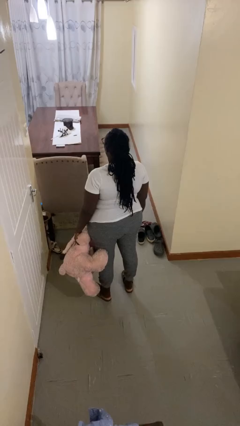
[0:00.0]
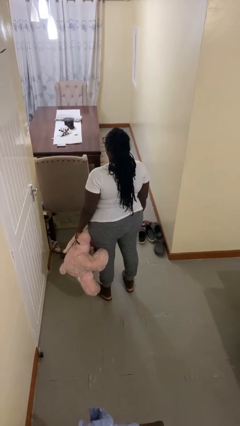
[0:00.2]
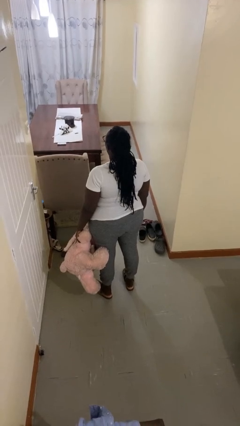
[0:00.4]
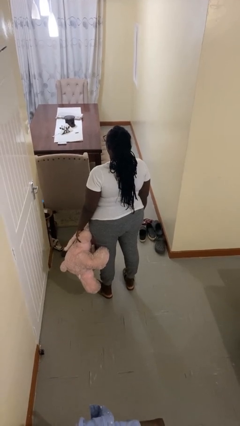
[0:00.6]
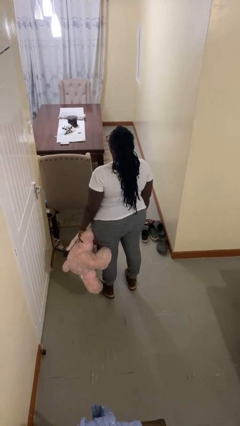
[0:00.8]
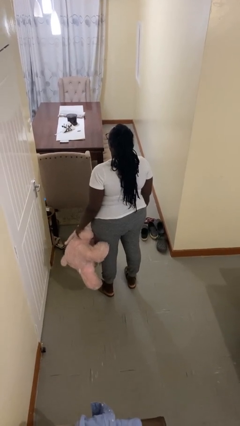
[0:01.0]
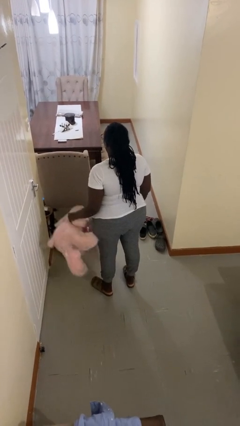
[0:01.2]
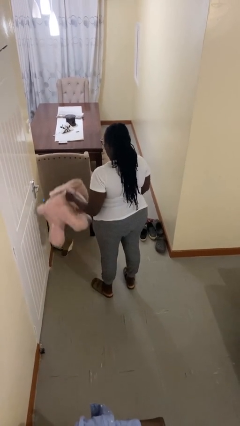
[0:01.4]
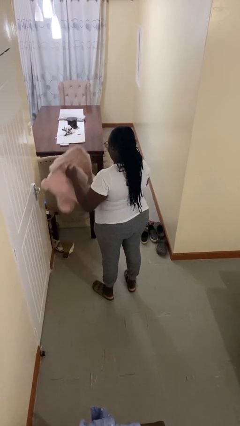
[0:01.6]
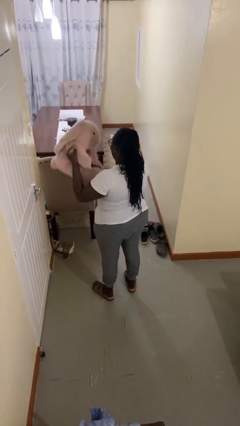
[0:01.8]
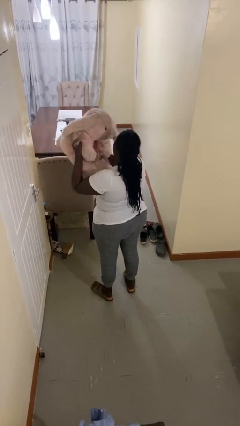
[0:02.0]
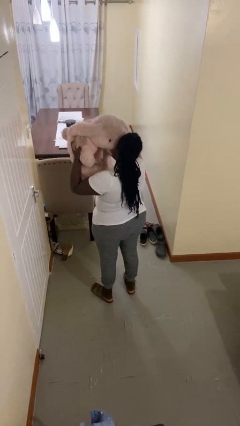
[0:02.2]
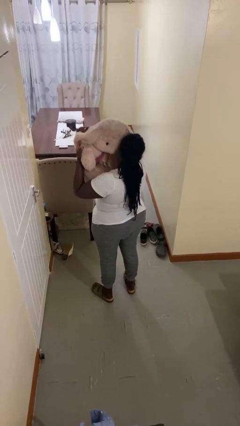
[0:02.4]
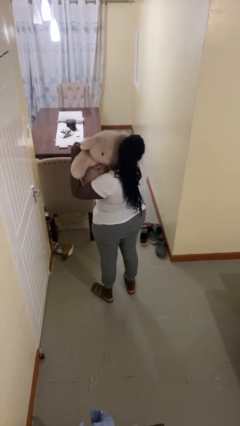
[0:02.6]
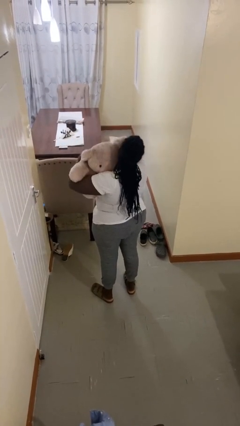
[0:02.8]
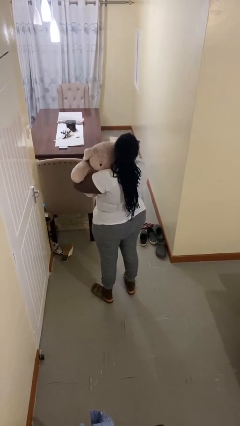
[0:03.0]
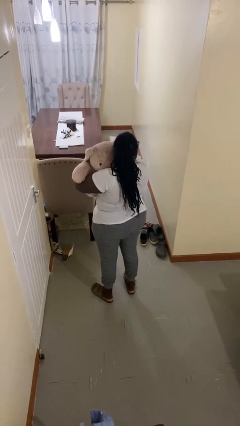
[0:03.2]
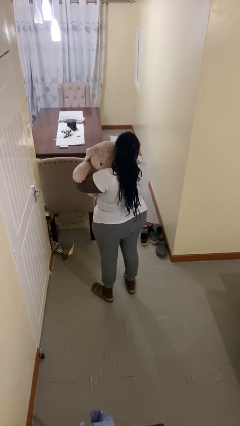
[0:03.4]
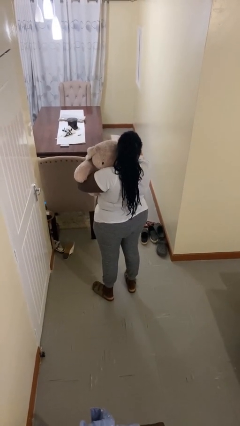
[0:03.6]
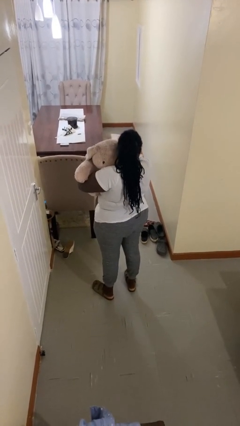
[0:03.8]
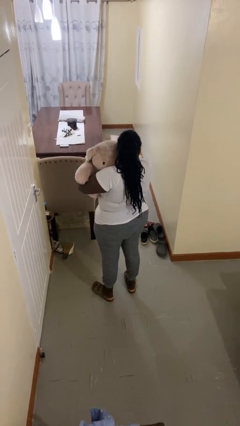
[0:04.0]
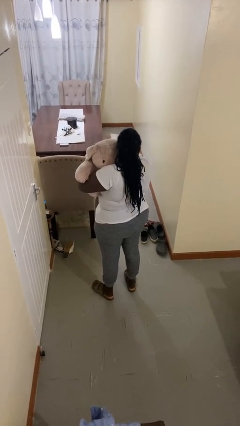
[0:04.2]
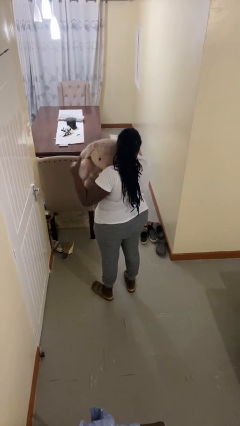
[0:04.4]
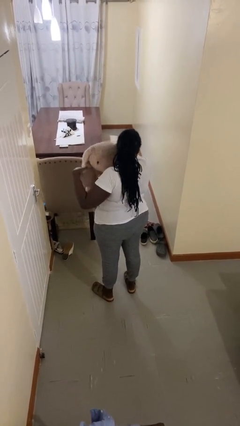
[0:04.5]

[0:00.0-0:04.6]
person hugs stuffed animal

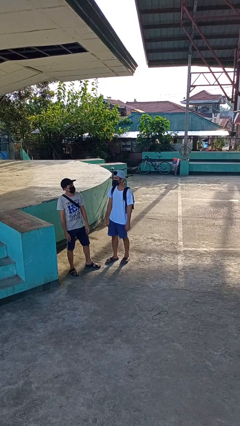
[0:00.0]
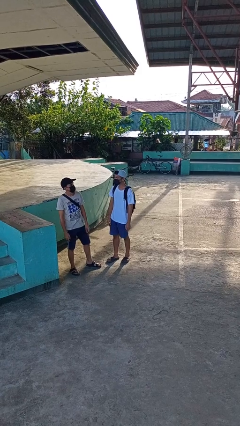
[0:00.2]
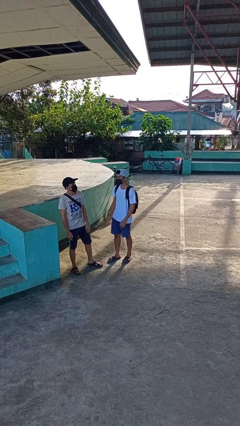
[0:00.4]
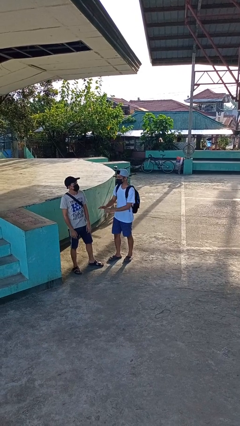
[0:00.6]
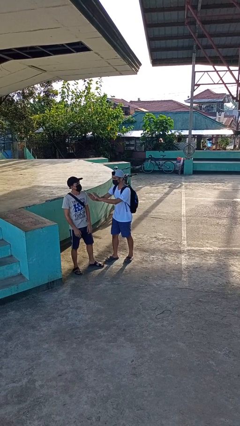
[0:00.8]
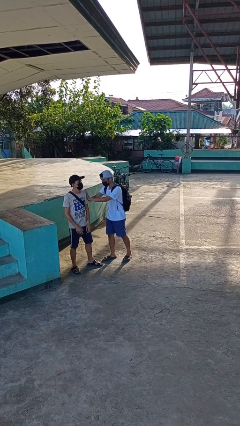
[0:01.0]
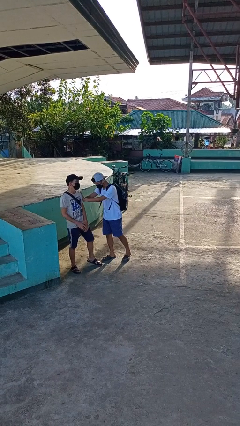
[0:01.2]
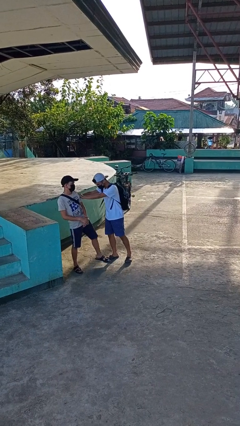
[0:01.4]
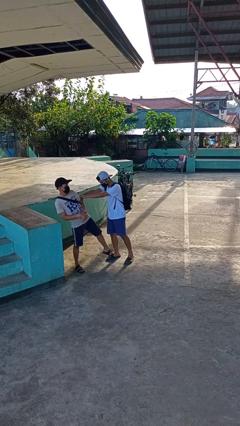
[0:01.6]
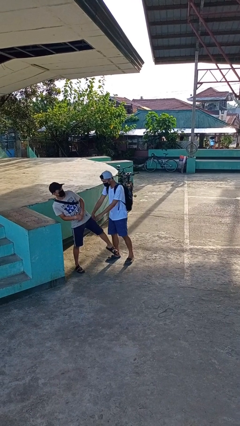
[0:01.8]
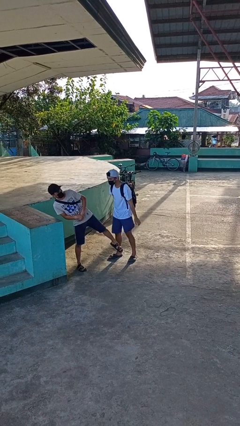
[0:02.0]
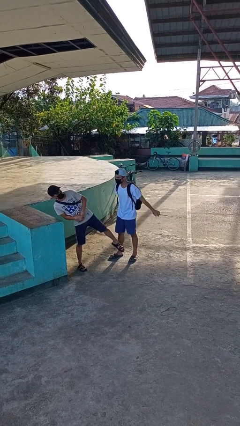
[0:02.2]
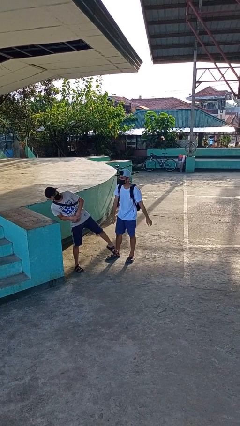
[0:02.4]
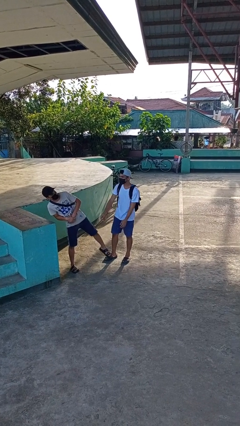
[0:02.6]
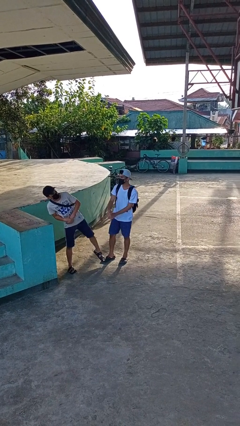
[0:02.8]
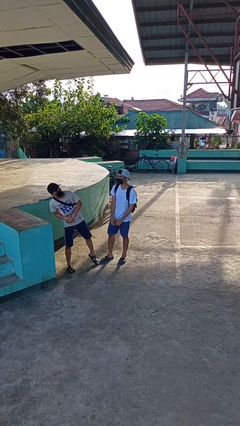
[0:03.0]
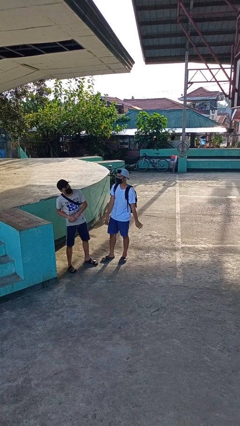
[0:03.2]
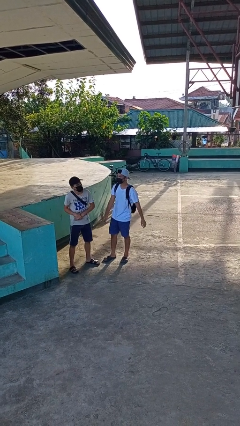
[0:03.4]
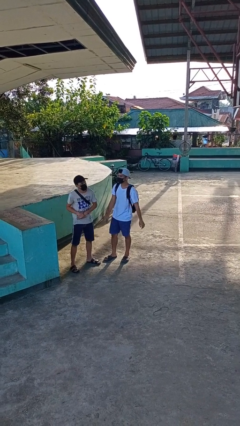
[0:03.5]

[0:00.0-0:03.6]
person shoves person

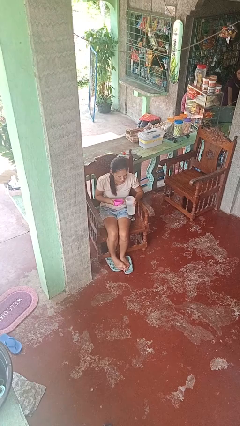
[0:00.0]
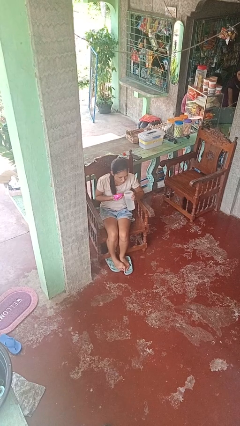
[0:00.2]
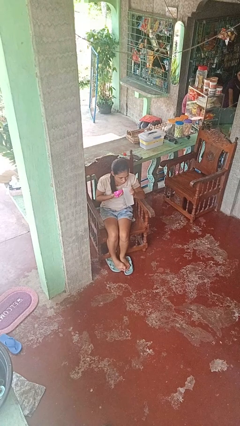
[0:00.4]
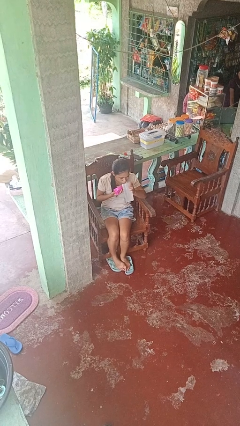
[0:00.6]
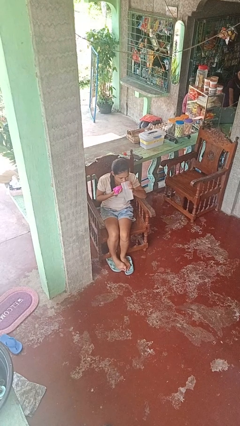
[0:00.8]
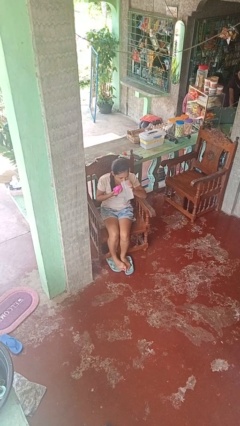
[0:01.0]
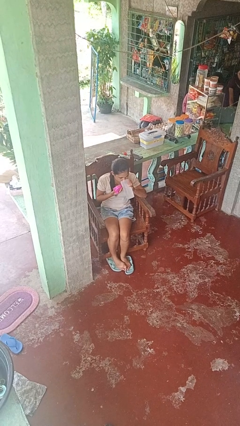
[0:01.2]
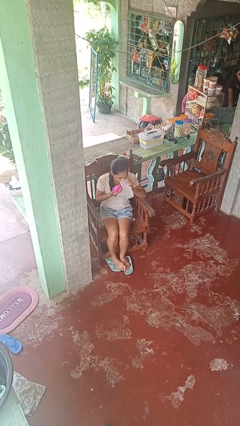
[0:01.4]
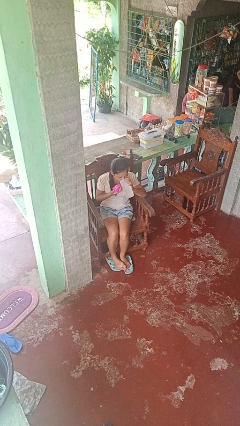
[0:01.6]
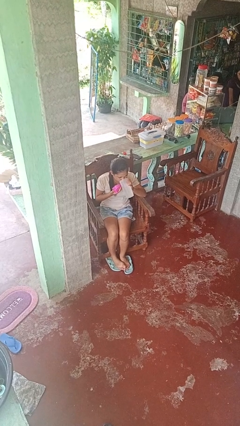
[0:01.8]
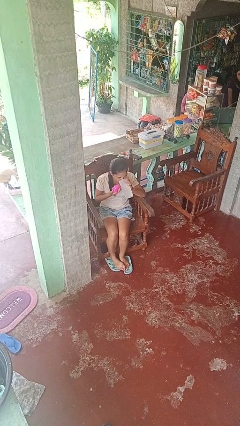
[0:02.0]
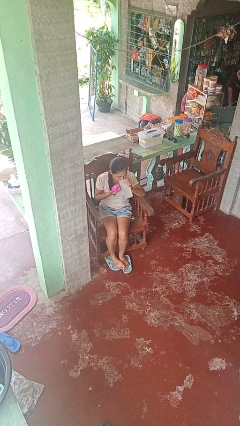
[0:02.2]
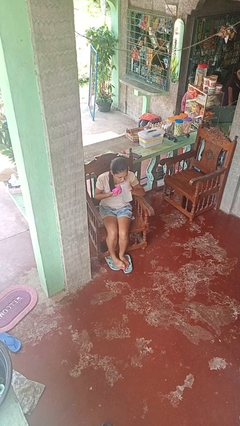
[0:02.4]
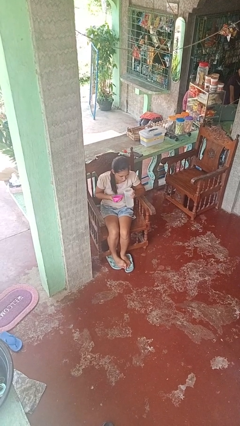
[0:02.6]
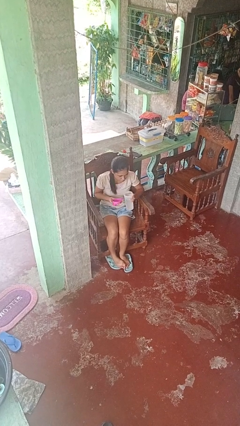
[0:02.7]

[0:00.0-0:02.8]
person drinks from bottle

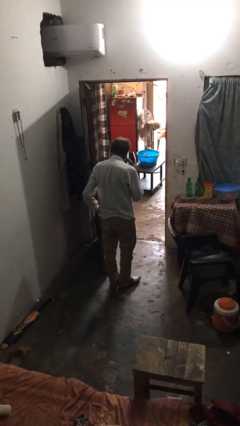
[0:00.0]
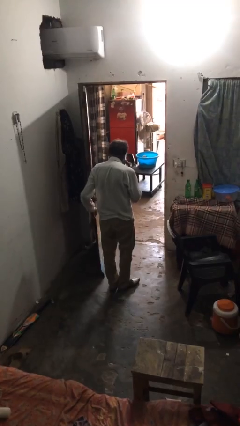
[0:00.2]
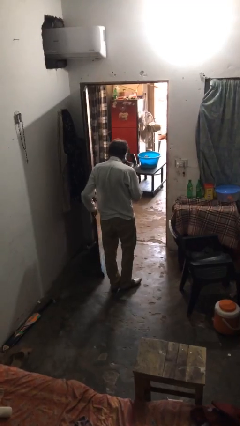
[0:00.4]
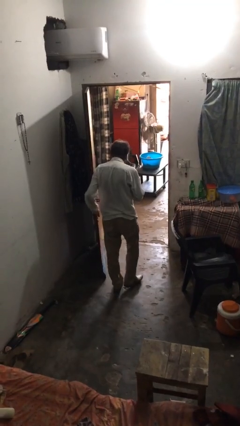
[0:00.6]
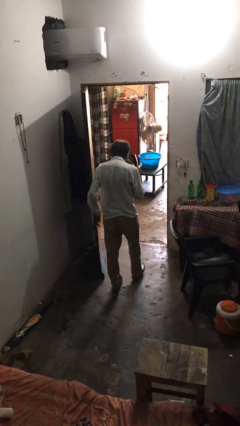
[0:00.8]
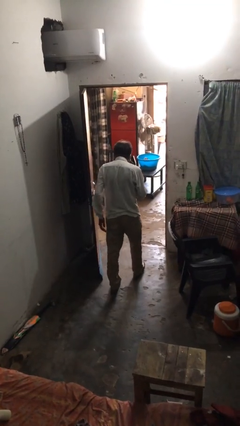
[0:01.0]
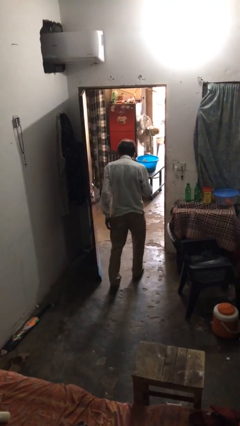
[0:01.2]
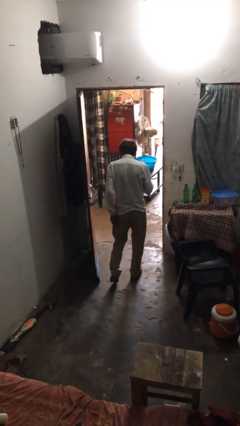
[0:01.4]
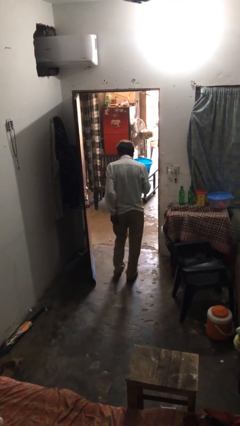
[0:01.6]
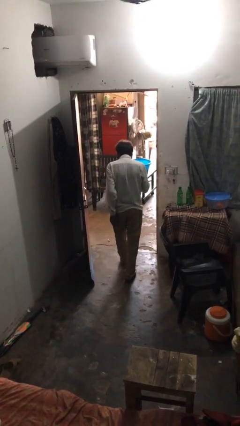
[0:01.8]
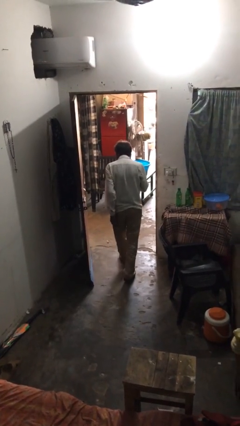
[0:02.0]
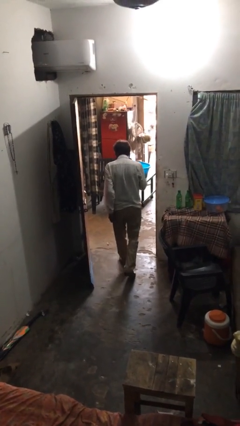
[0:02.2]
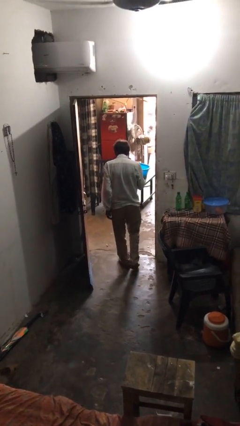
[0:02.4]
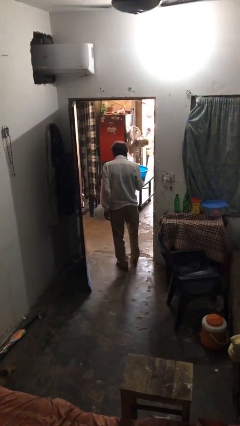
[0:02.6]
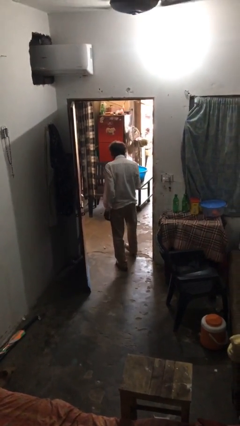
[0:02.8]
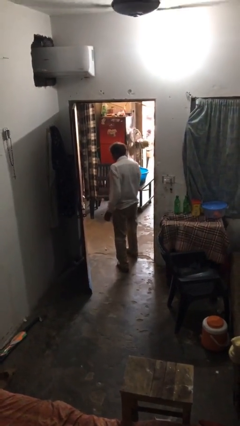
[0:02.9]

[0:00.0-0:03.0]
person exits scene through structure

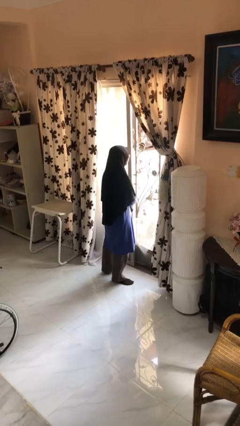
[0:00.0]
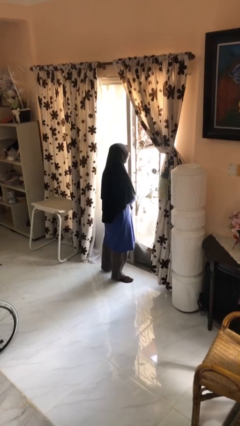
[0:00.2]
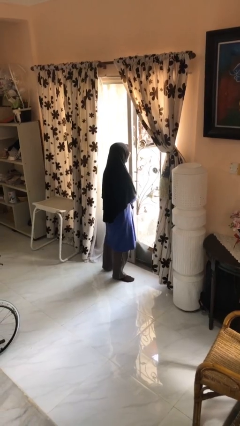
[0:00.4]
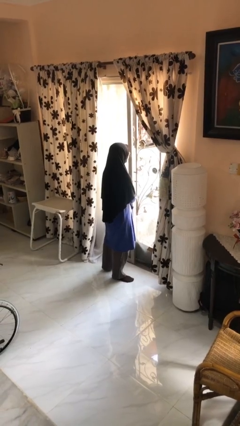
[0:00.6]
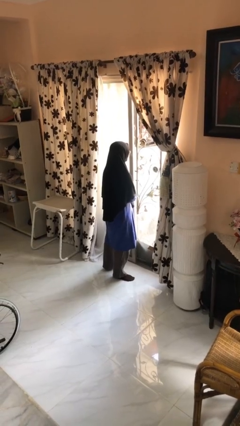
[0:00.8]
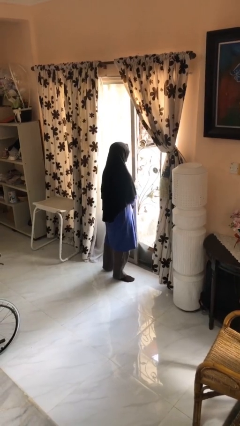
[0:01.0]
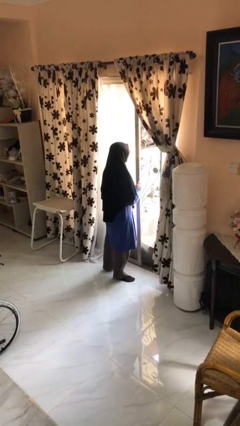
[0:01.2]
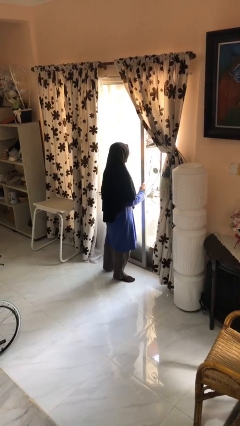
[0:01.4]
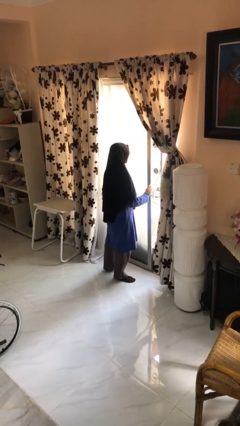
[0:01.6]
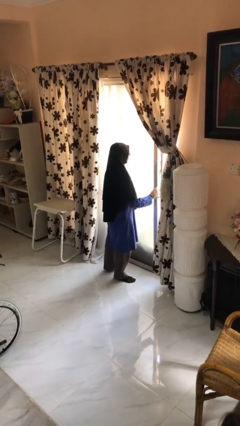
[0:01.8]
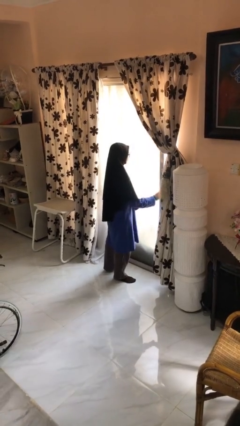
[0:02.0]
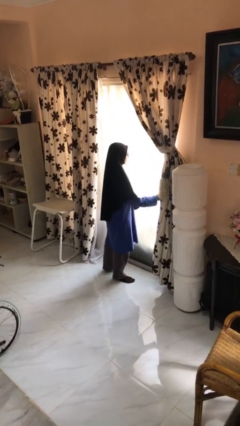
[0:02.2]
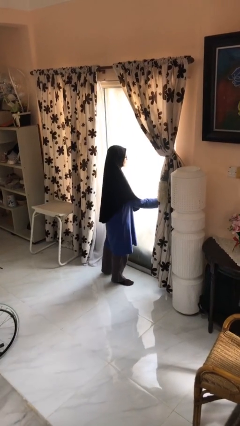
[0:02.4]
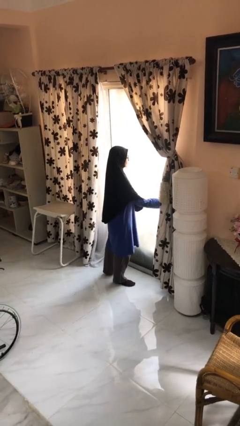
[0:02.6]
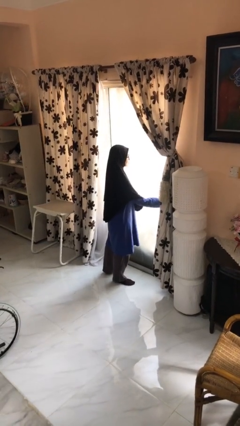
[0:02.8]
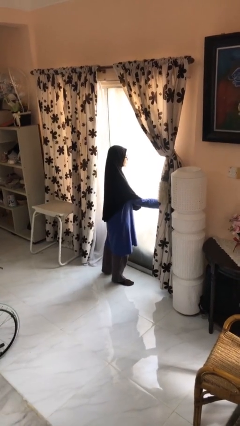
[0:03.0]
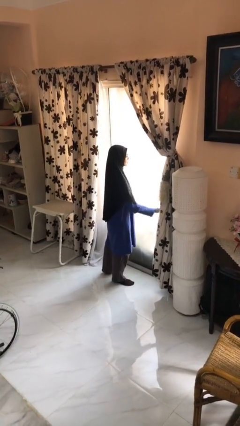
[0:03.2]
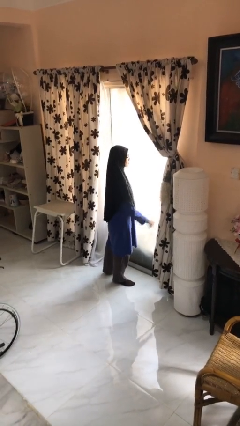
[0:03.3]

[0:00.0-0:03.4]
person closes sliding door

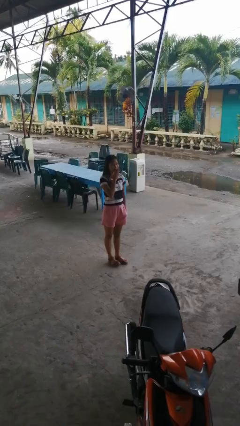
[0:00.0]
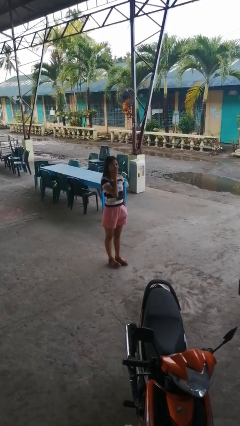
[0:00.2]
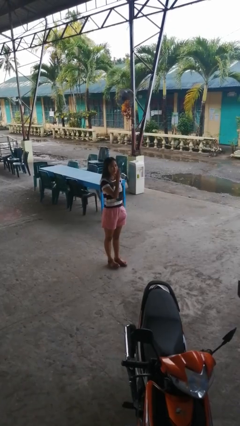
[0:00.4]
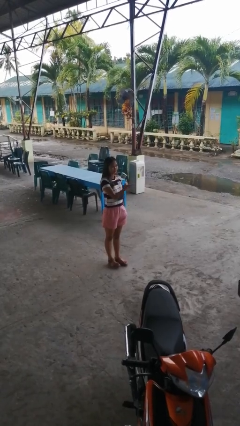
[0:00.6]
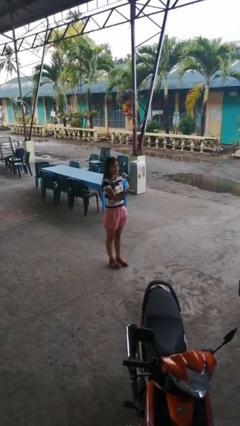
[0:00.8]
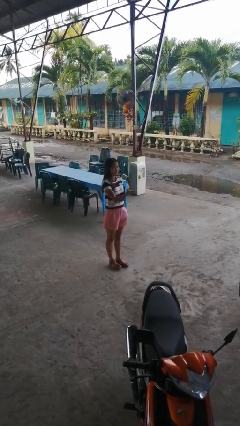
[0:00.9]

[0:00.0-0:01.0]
person gestures blow kiss
